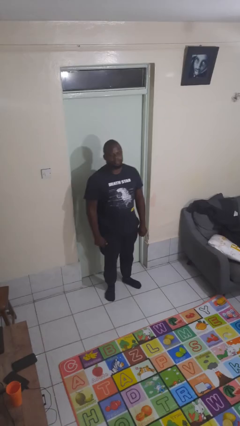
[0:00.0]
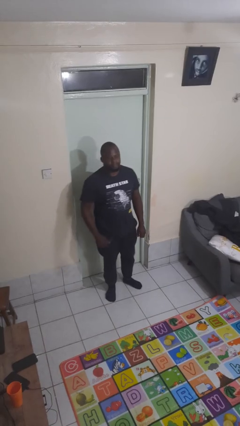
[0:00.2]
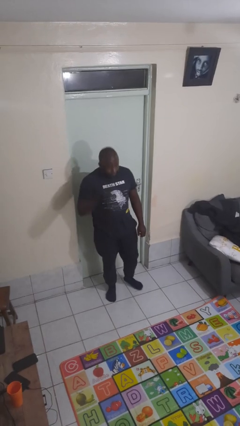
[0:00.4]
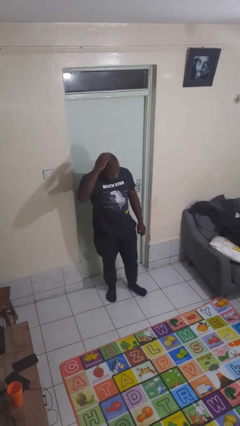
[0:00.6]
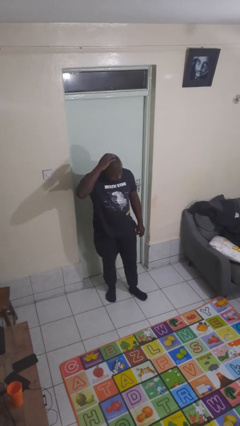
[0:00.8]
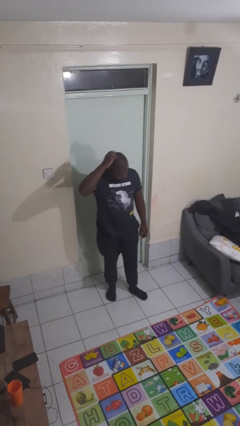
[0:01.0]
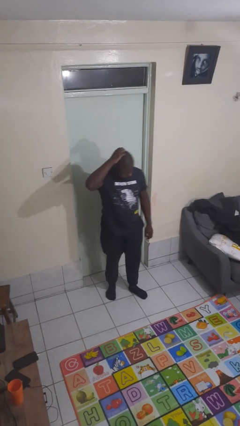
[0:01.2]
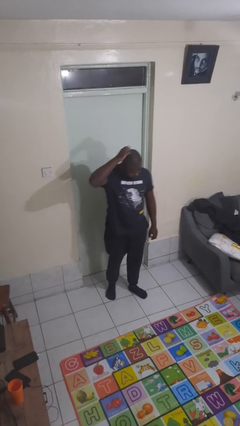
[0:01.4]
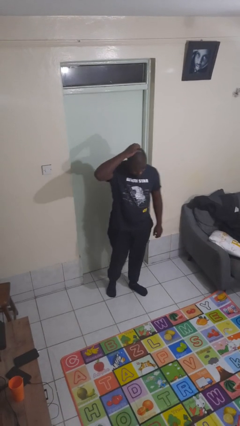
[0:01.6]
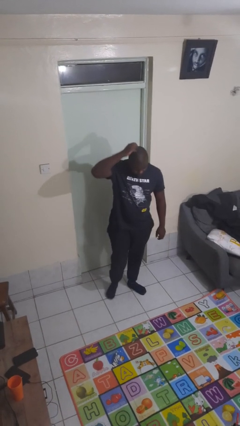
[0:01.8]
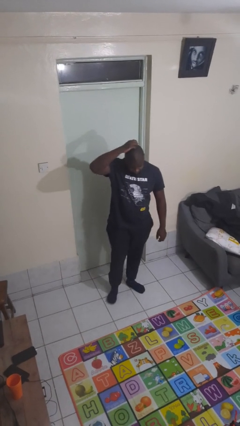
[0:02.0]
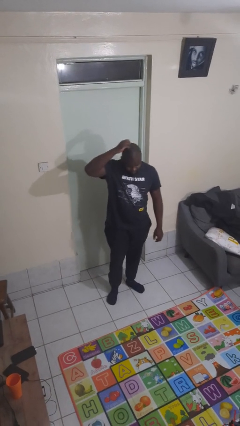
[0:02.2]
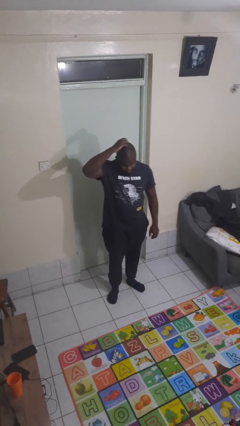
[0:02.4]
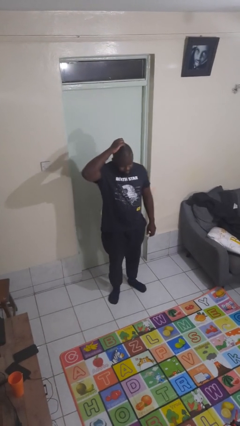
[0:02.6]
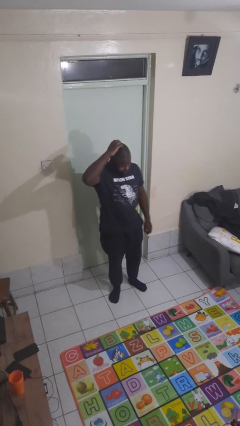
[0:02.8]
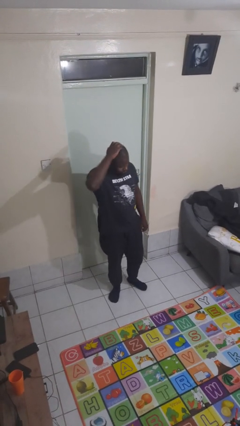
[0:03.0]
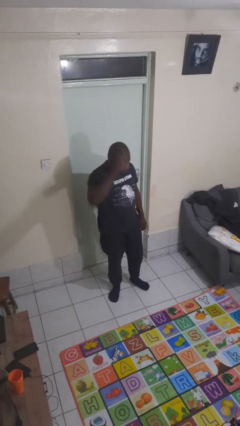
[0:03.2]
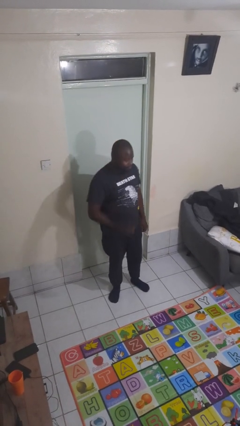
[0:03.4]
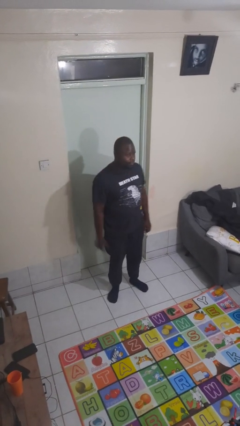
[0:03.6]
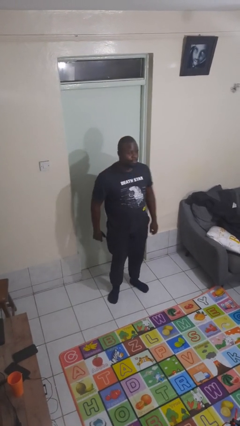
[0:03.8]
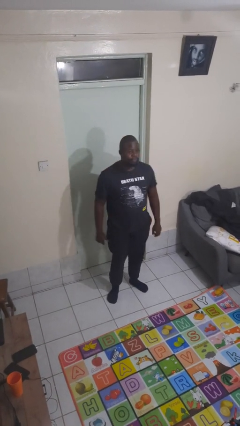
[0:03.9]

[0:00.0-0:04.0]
person scratches face

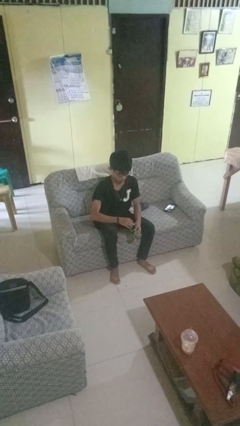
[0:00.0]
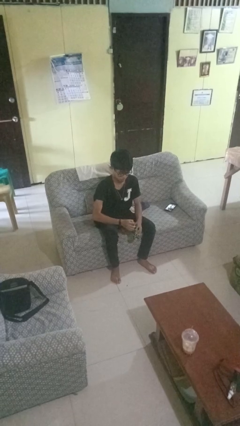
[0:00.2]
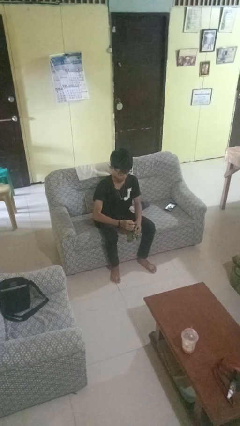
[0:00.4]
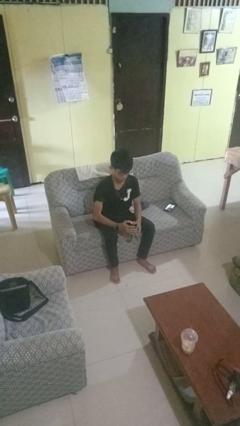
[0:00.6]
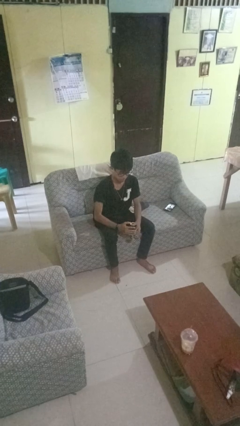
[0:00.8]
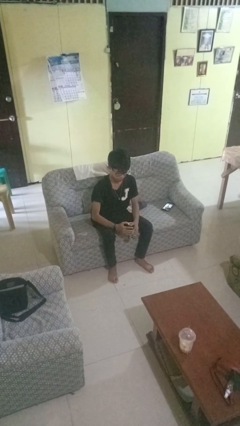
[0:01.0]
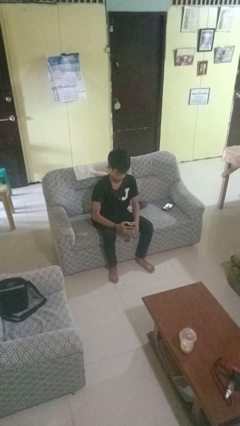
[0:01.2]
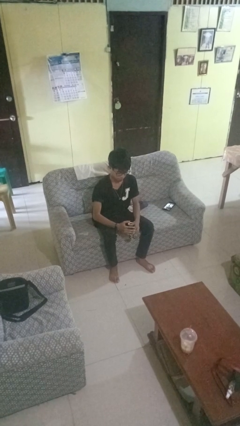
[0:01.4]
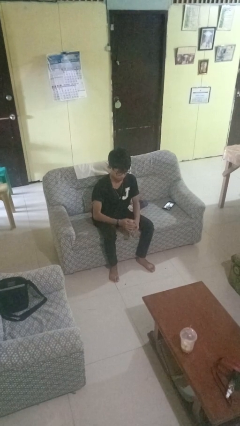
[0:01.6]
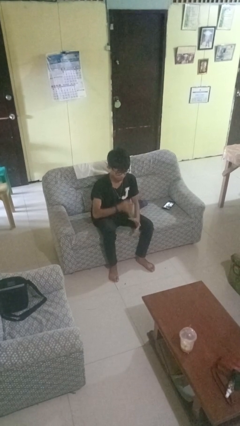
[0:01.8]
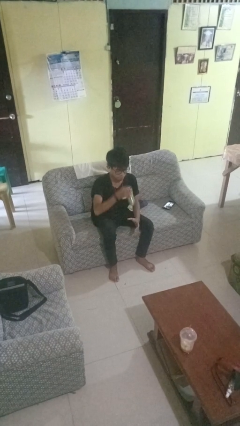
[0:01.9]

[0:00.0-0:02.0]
person opens beverage can

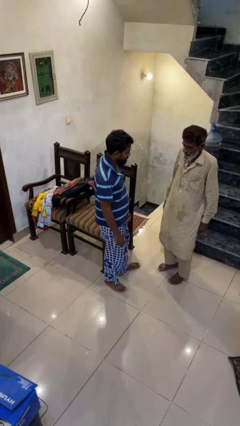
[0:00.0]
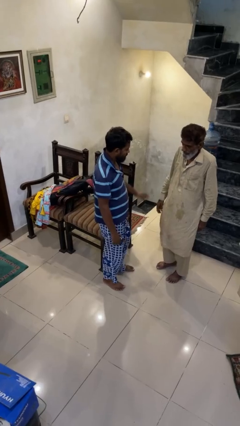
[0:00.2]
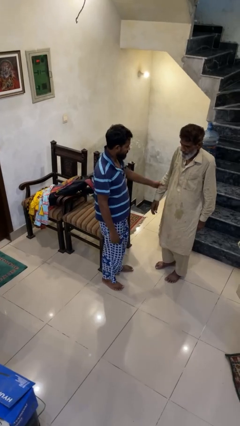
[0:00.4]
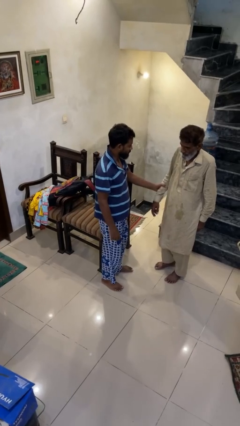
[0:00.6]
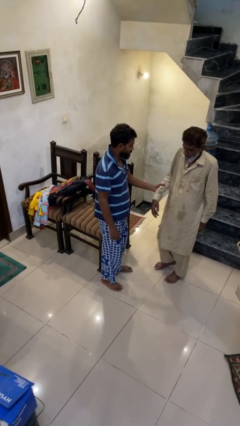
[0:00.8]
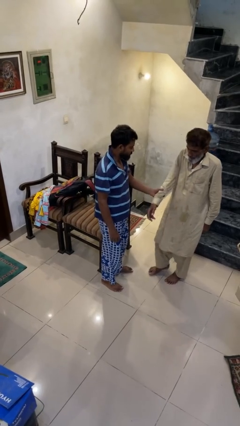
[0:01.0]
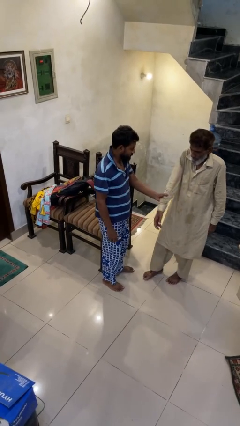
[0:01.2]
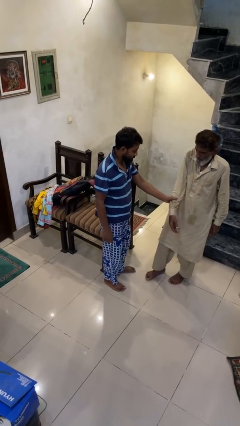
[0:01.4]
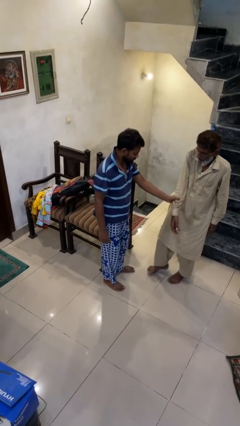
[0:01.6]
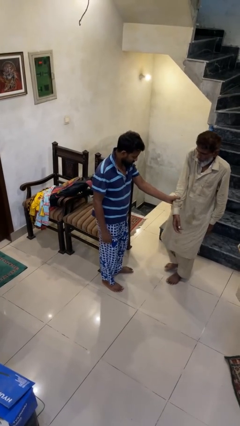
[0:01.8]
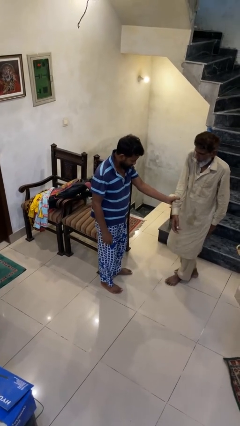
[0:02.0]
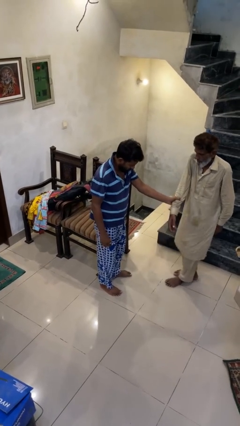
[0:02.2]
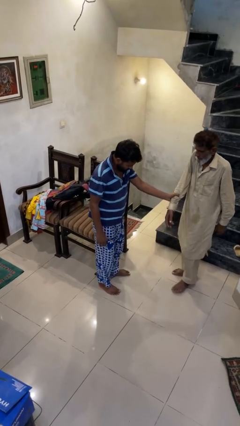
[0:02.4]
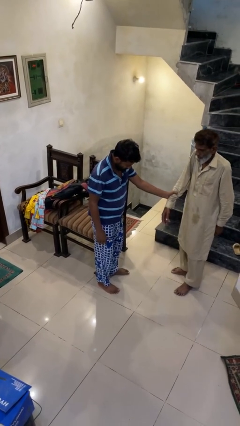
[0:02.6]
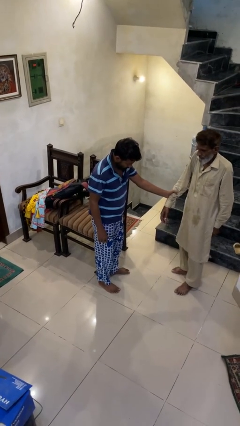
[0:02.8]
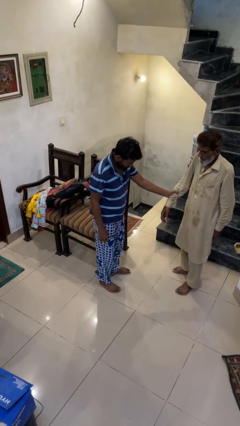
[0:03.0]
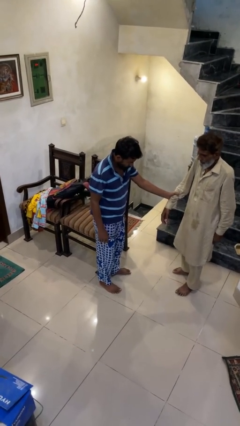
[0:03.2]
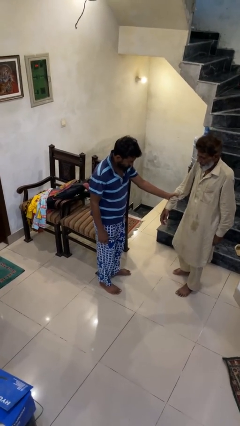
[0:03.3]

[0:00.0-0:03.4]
person grabs person by forearm

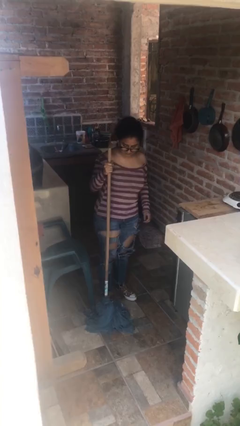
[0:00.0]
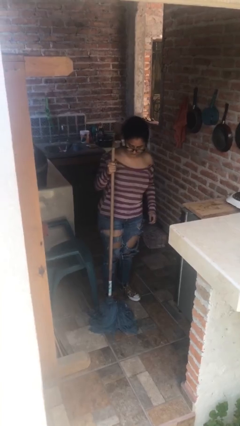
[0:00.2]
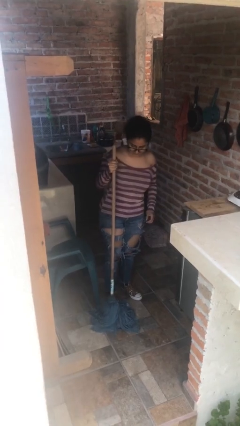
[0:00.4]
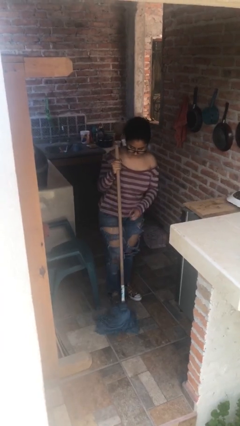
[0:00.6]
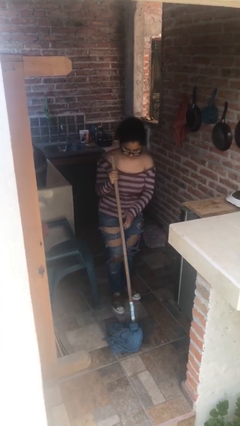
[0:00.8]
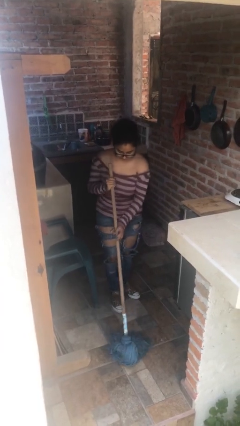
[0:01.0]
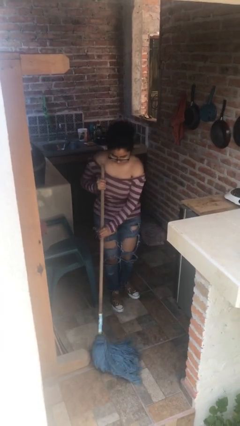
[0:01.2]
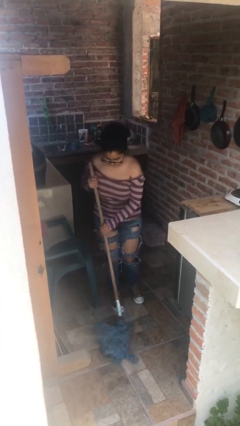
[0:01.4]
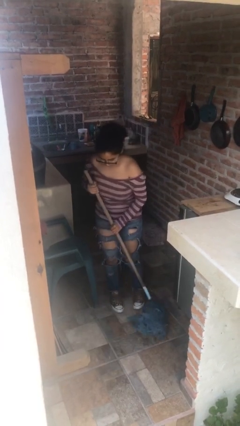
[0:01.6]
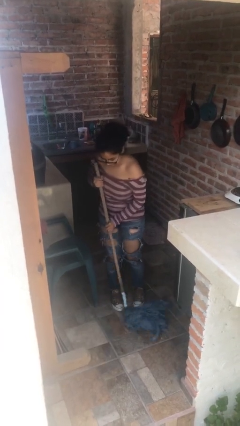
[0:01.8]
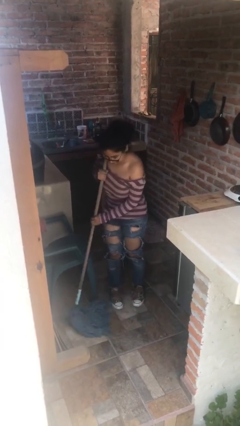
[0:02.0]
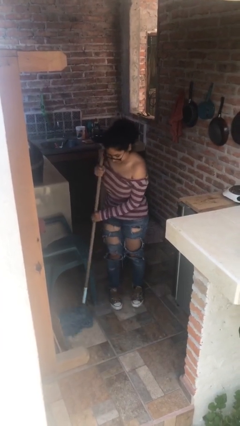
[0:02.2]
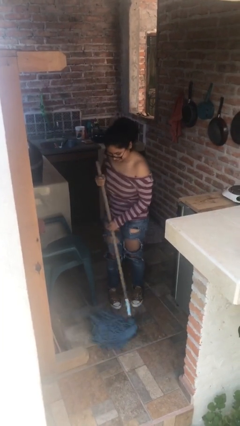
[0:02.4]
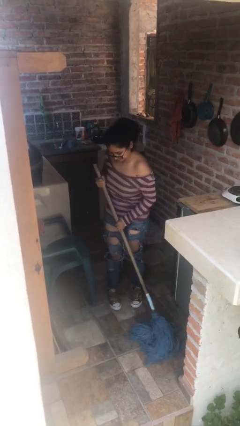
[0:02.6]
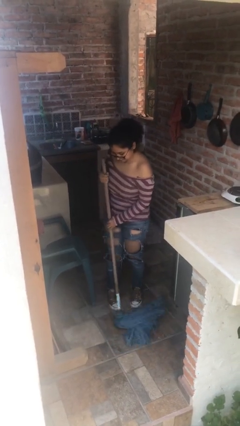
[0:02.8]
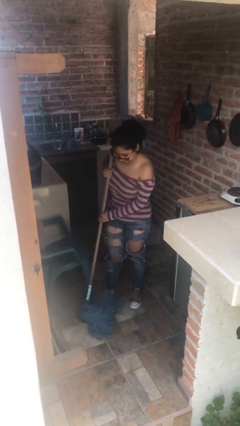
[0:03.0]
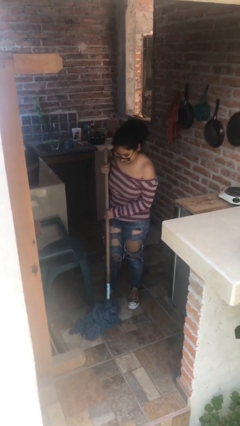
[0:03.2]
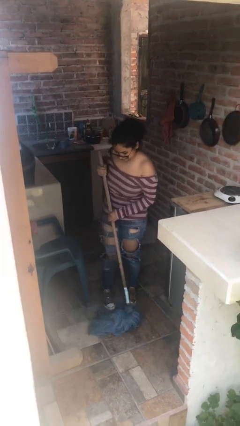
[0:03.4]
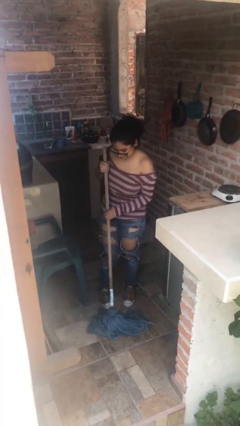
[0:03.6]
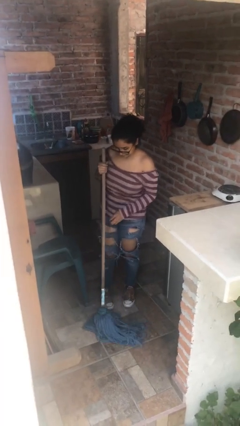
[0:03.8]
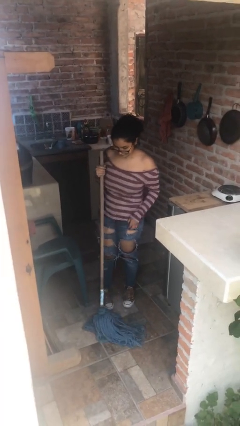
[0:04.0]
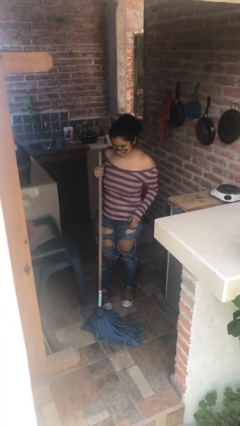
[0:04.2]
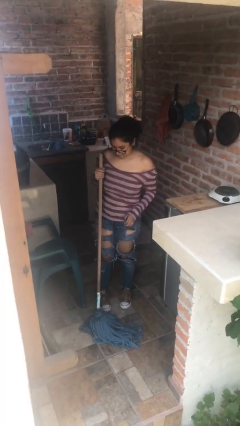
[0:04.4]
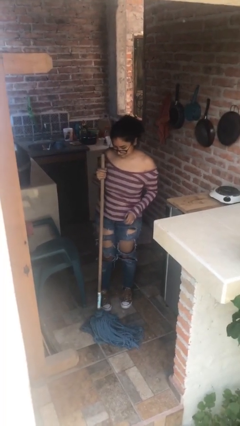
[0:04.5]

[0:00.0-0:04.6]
person mops

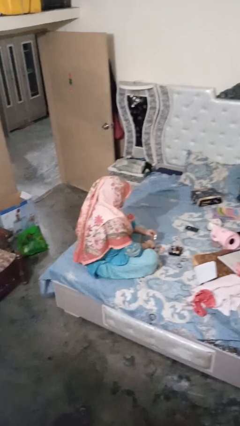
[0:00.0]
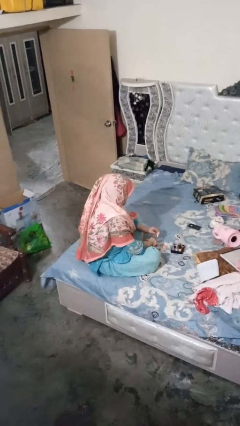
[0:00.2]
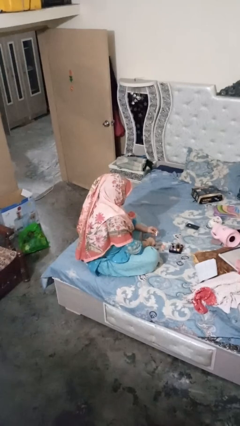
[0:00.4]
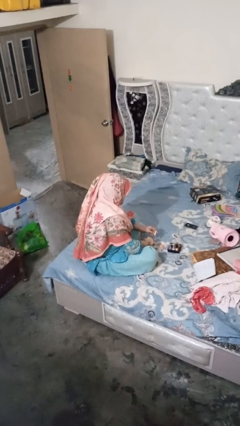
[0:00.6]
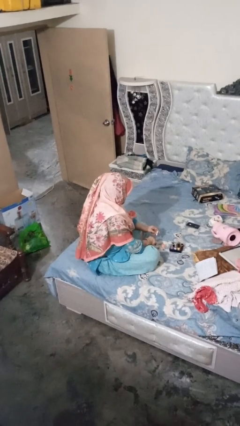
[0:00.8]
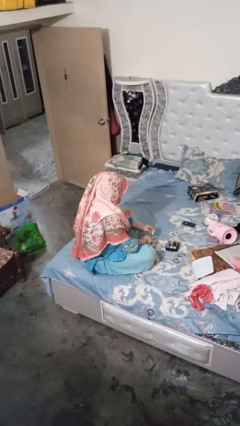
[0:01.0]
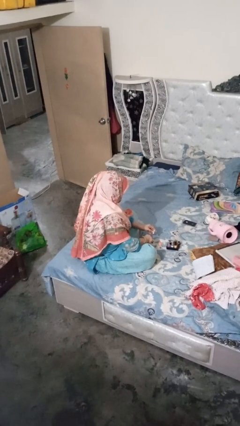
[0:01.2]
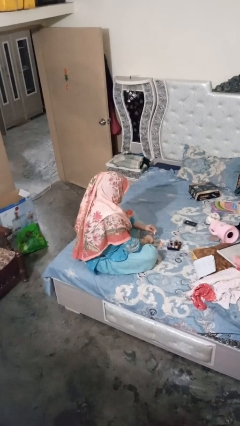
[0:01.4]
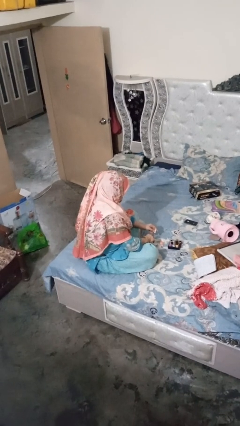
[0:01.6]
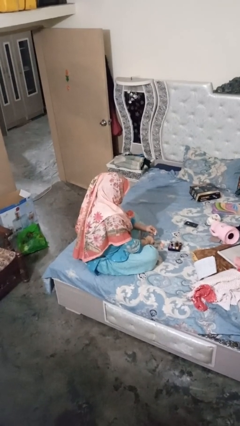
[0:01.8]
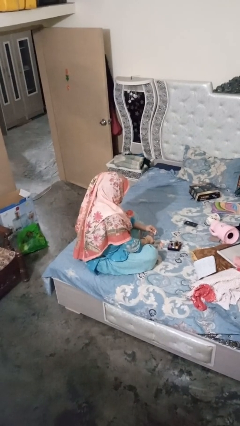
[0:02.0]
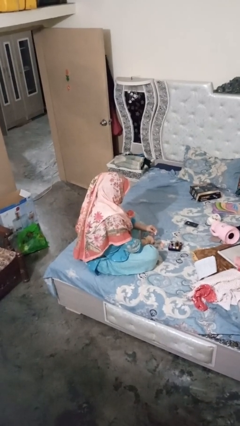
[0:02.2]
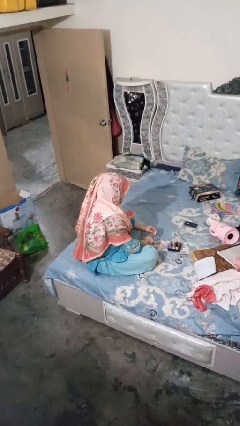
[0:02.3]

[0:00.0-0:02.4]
person paints fingernails

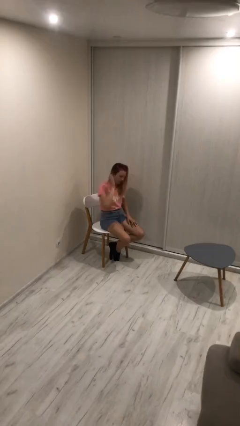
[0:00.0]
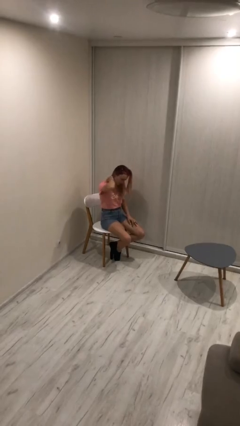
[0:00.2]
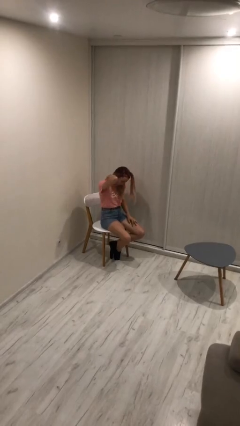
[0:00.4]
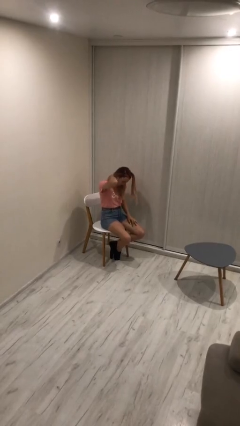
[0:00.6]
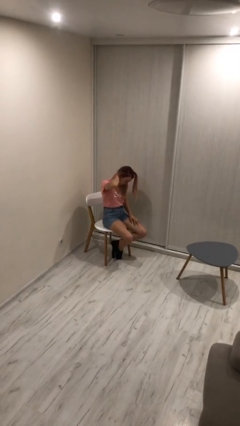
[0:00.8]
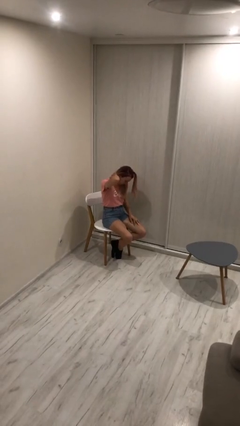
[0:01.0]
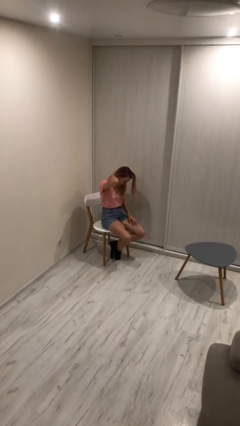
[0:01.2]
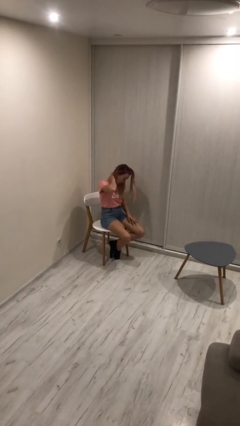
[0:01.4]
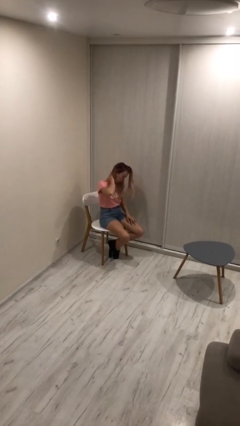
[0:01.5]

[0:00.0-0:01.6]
person rubs neck
